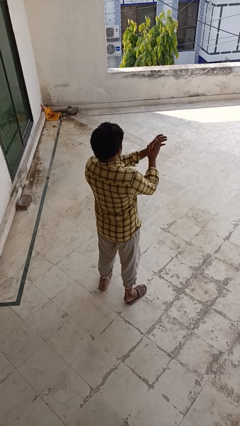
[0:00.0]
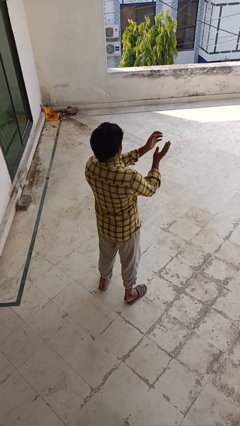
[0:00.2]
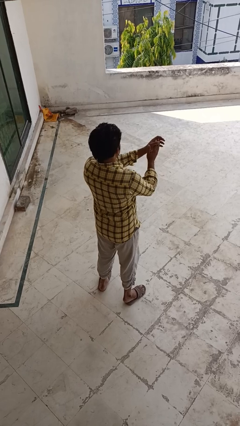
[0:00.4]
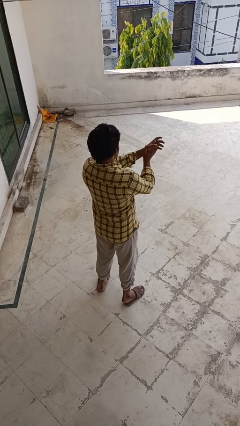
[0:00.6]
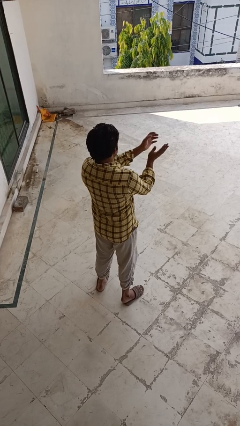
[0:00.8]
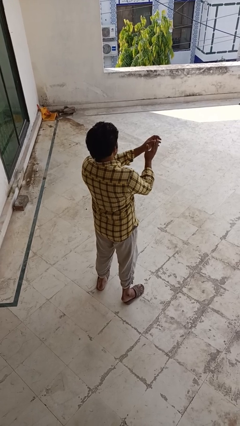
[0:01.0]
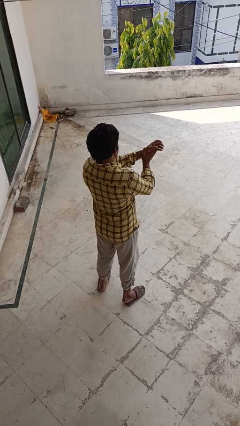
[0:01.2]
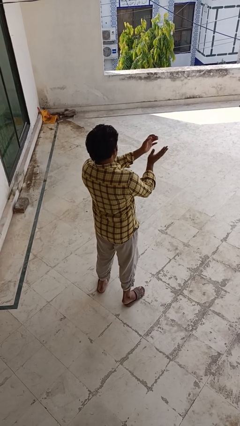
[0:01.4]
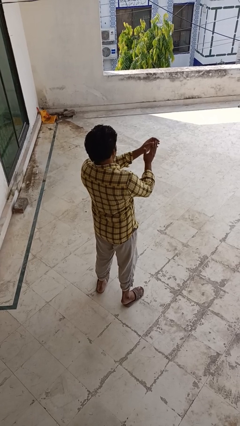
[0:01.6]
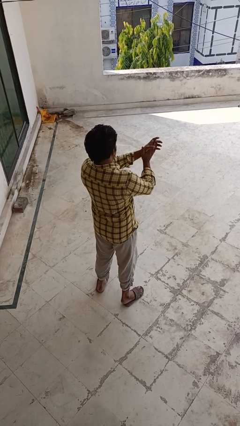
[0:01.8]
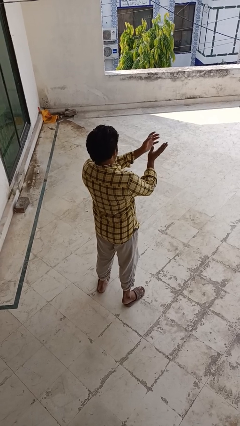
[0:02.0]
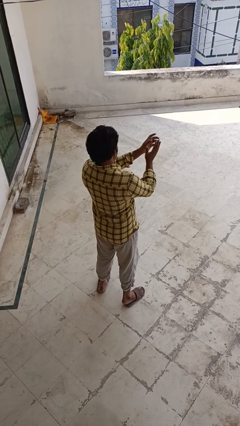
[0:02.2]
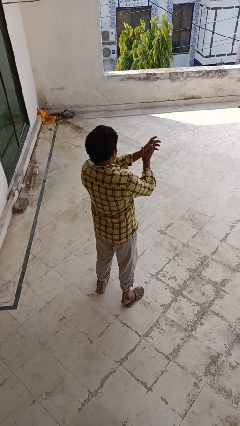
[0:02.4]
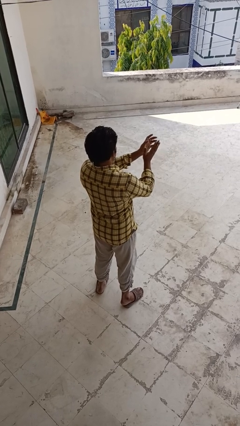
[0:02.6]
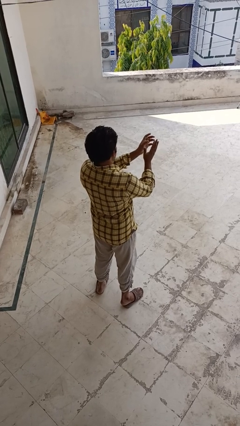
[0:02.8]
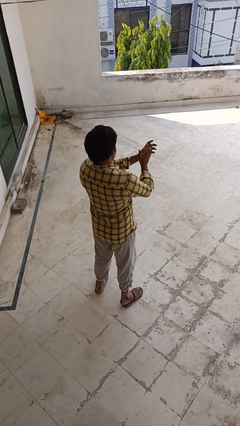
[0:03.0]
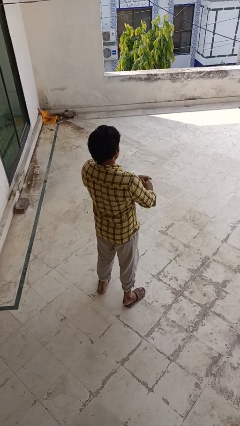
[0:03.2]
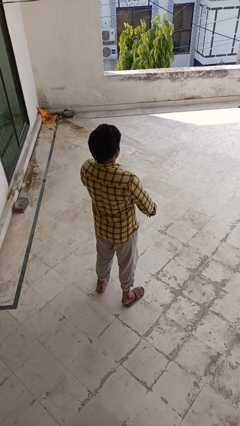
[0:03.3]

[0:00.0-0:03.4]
person claps hands

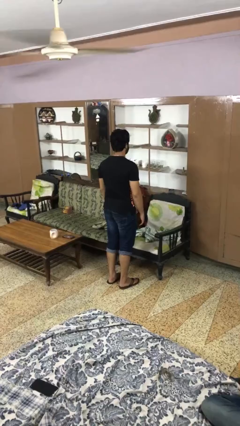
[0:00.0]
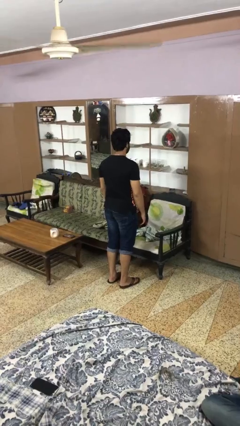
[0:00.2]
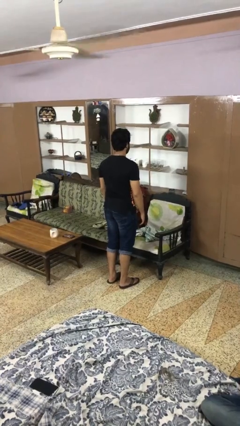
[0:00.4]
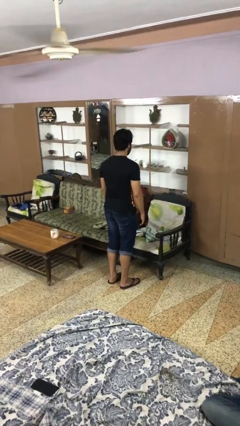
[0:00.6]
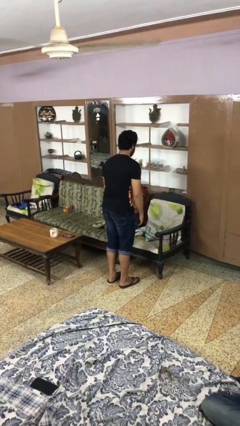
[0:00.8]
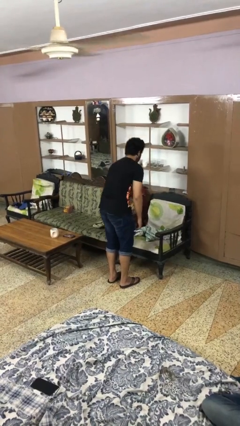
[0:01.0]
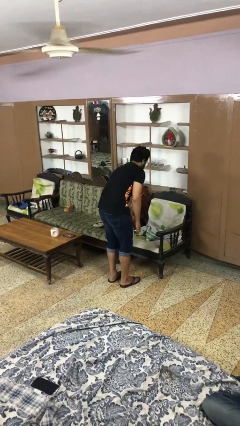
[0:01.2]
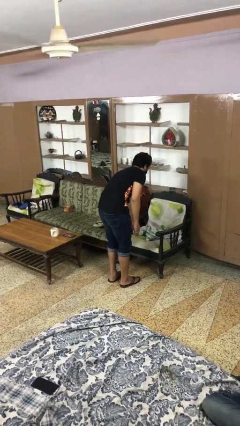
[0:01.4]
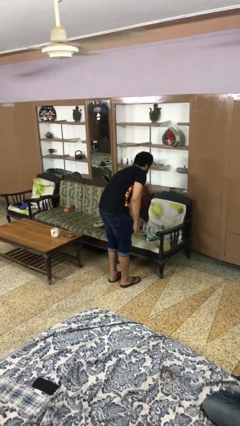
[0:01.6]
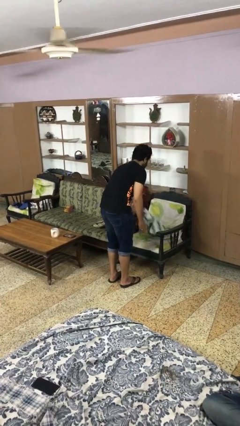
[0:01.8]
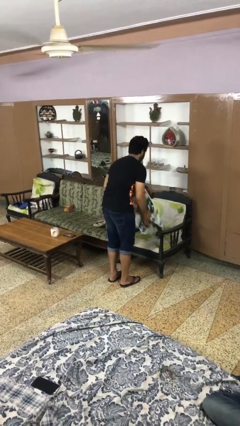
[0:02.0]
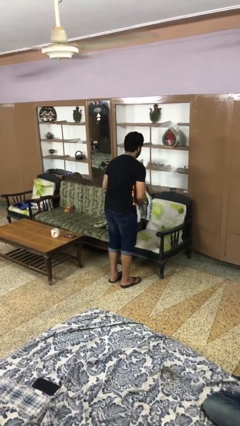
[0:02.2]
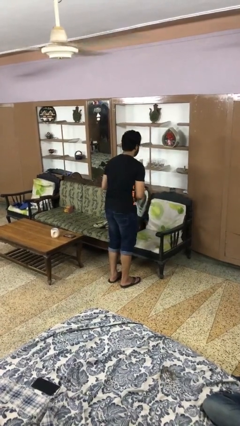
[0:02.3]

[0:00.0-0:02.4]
person picks up object from cabinet

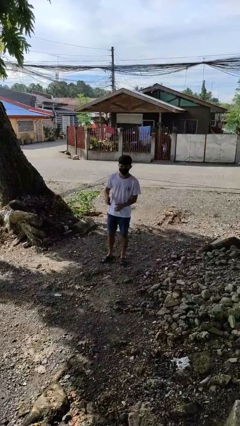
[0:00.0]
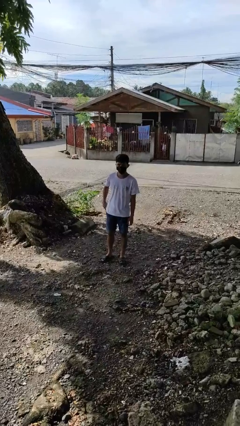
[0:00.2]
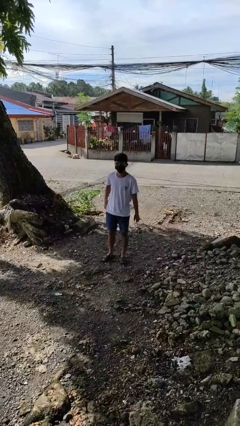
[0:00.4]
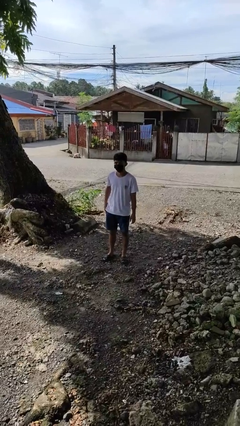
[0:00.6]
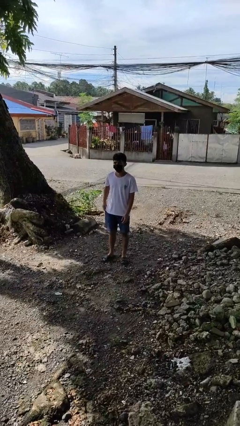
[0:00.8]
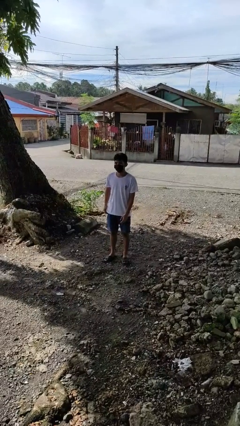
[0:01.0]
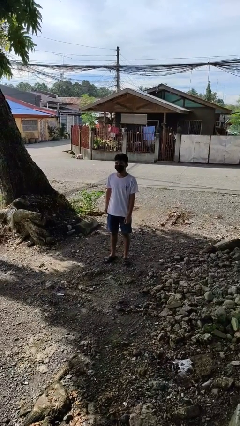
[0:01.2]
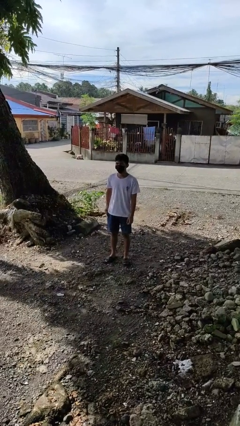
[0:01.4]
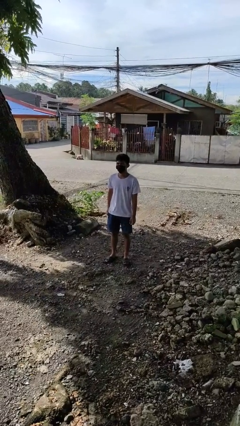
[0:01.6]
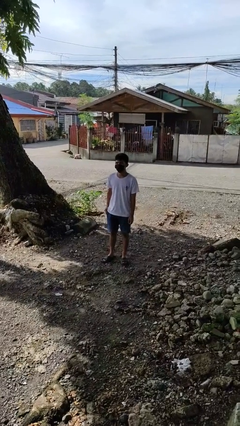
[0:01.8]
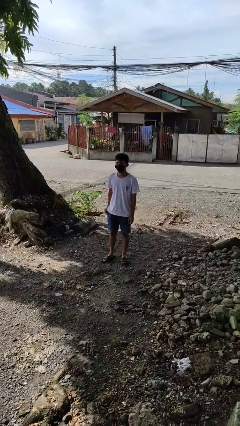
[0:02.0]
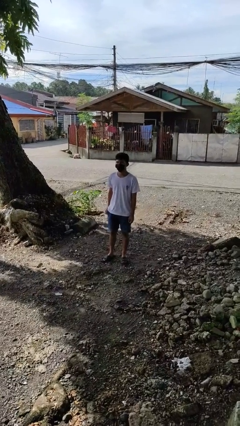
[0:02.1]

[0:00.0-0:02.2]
person puts phone into pocket

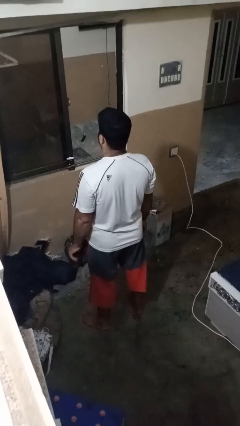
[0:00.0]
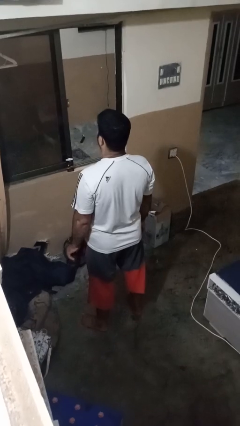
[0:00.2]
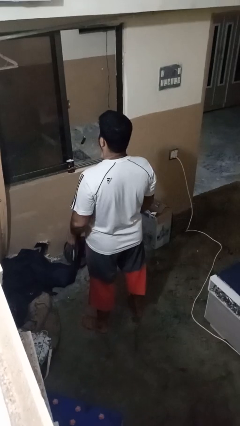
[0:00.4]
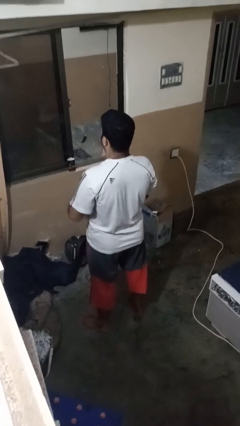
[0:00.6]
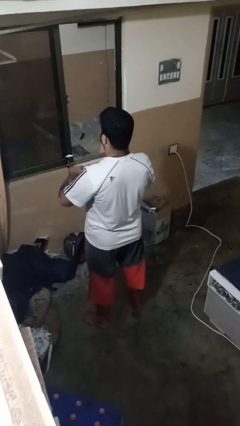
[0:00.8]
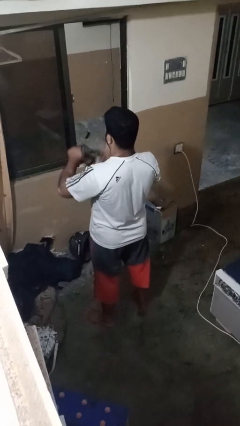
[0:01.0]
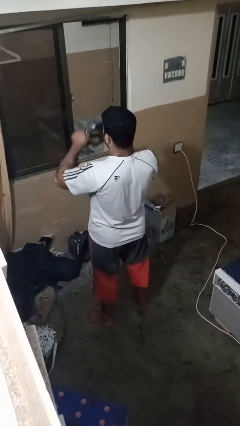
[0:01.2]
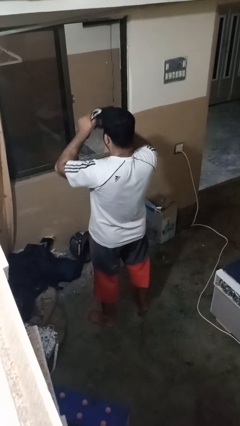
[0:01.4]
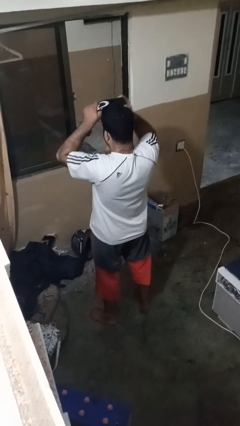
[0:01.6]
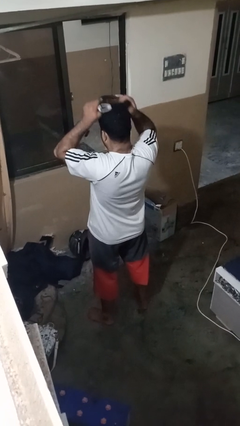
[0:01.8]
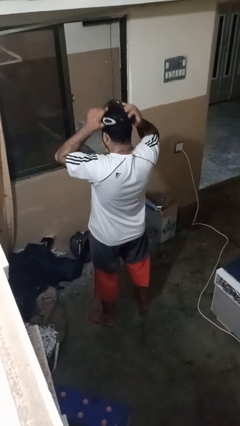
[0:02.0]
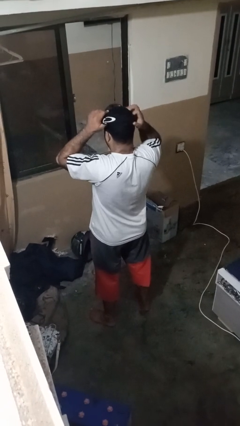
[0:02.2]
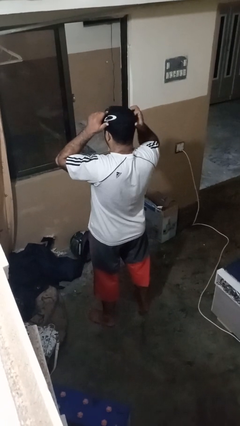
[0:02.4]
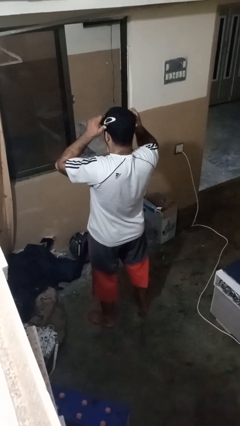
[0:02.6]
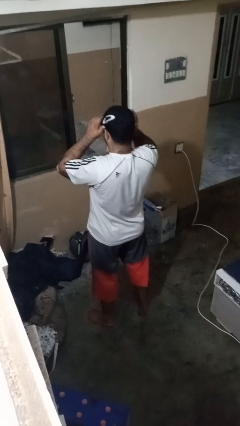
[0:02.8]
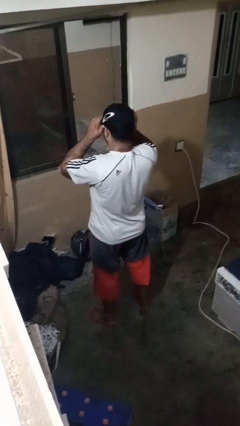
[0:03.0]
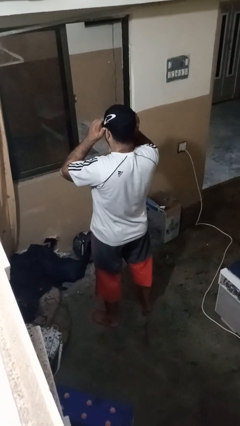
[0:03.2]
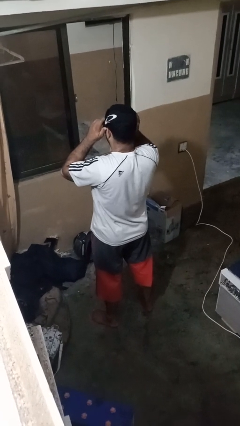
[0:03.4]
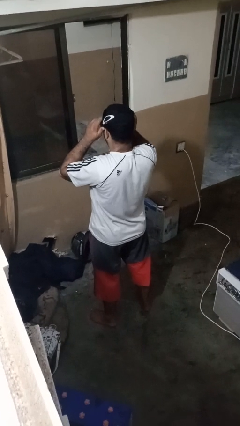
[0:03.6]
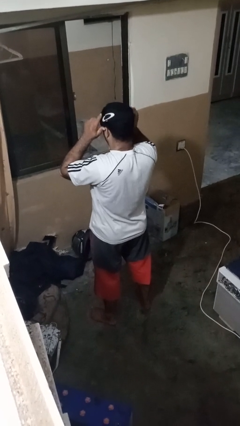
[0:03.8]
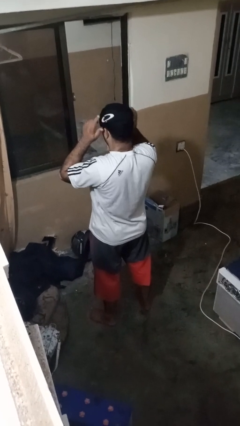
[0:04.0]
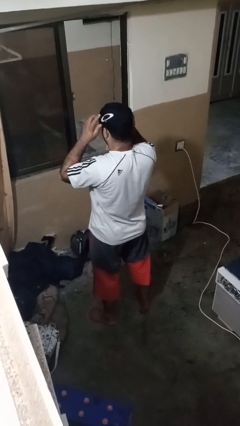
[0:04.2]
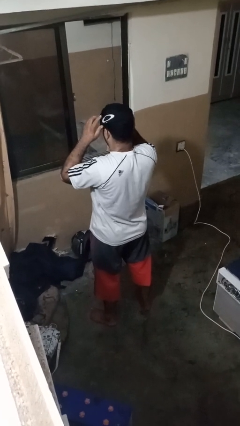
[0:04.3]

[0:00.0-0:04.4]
person puts on sunglasses

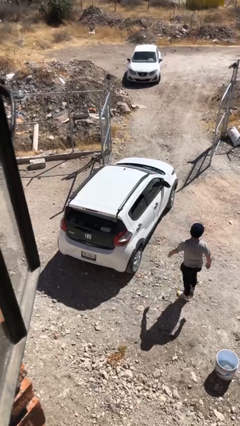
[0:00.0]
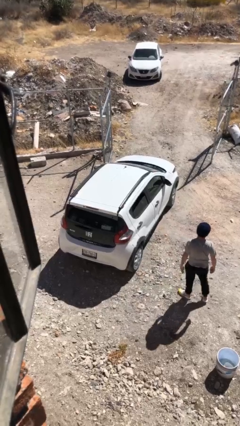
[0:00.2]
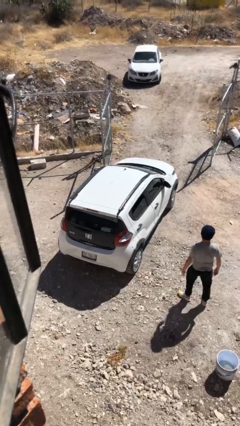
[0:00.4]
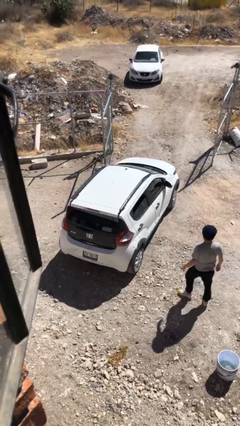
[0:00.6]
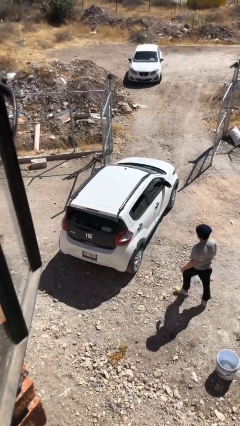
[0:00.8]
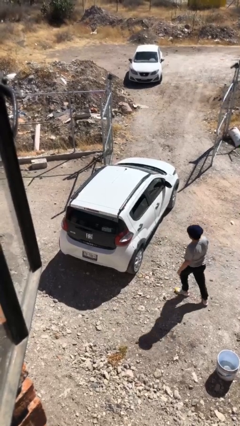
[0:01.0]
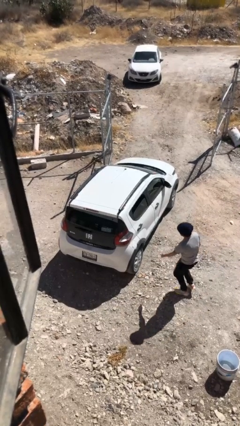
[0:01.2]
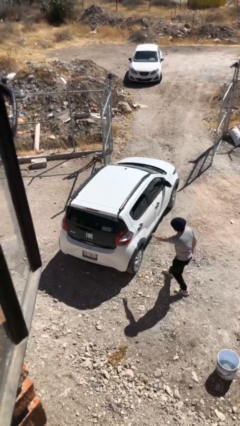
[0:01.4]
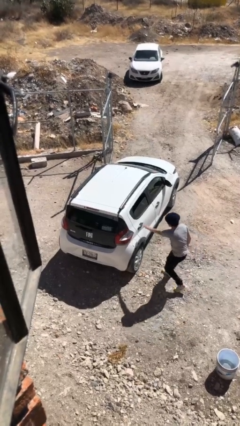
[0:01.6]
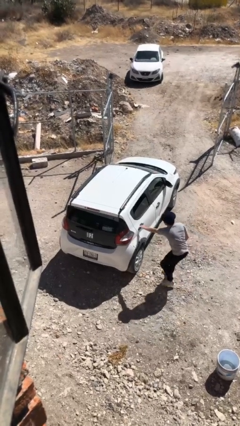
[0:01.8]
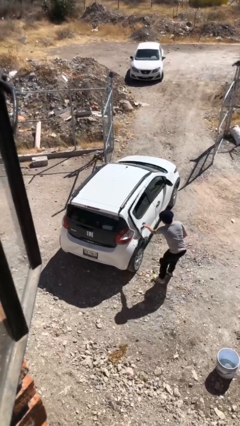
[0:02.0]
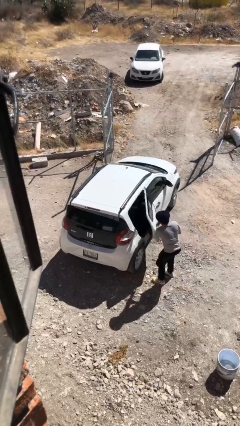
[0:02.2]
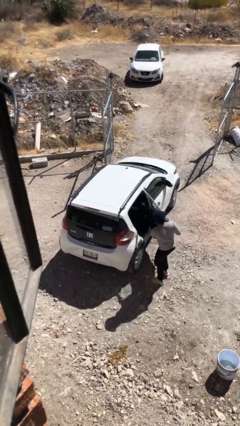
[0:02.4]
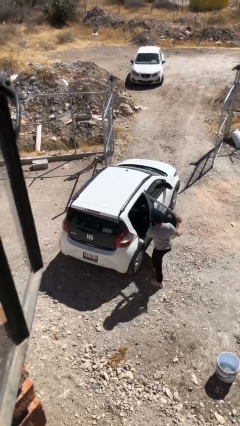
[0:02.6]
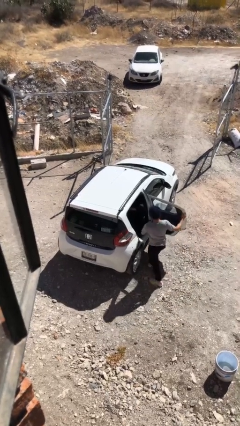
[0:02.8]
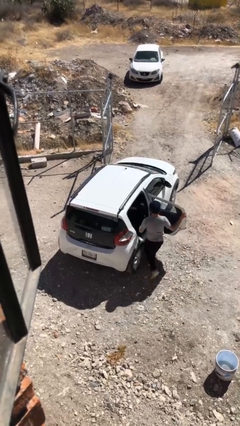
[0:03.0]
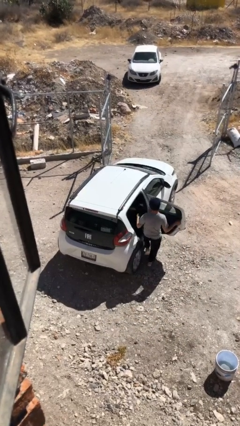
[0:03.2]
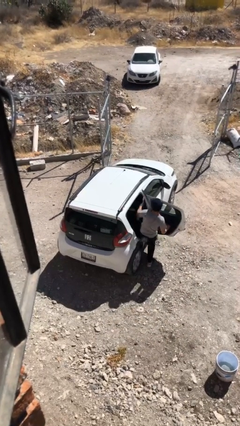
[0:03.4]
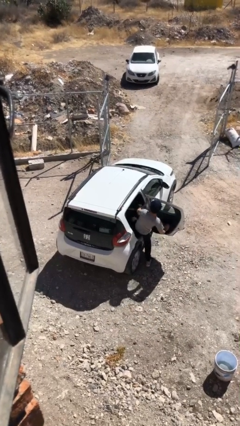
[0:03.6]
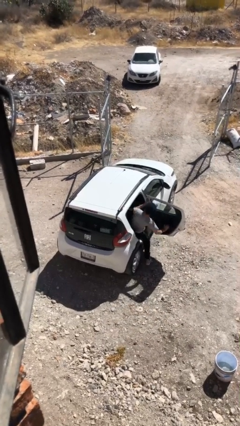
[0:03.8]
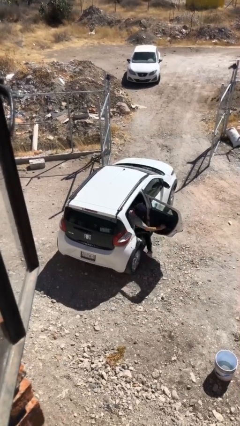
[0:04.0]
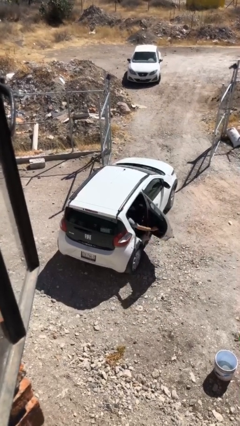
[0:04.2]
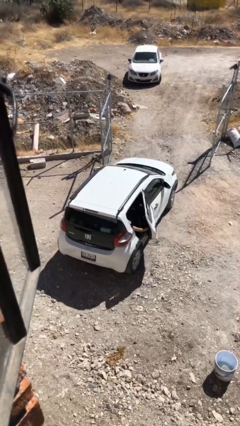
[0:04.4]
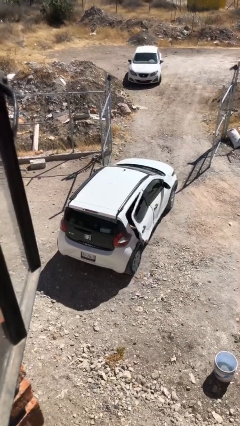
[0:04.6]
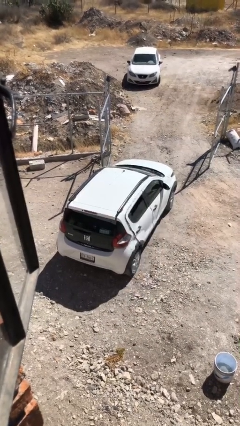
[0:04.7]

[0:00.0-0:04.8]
car picks up person
